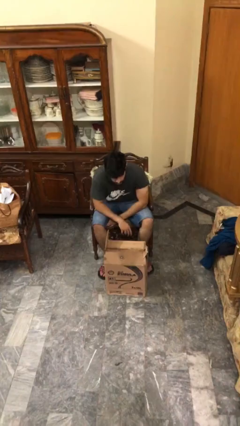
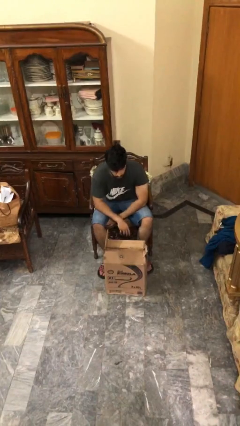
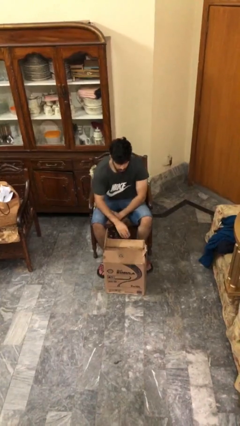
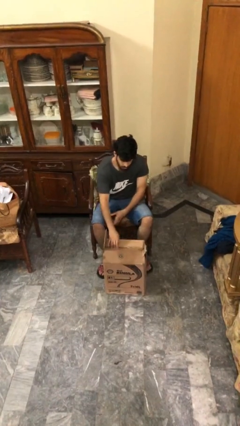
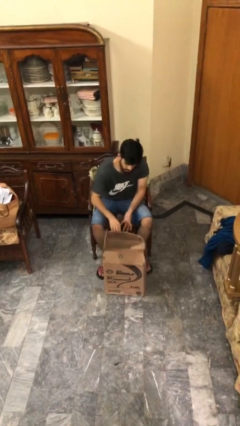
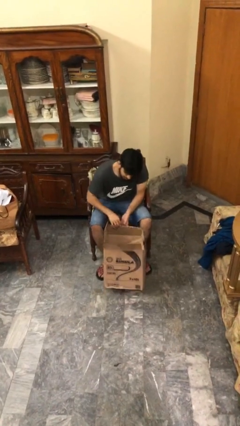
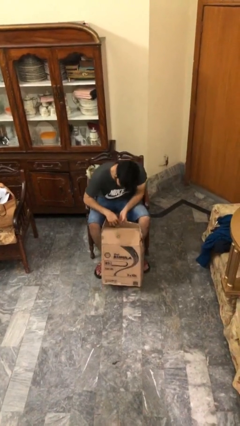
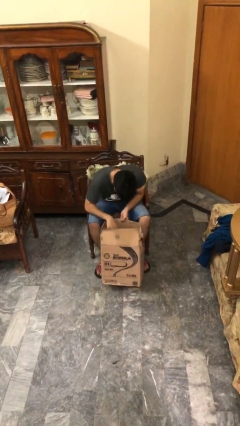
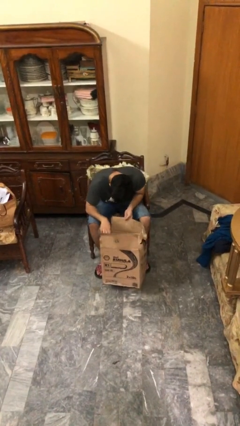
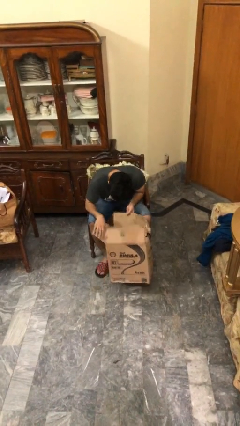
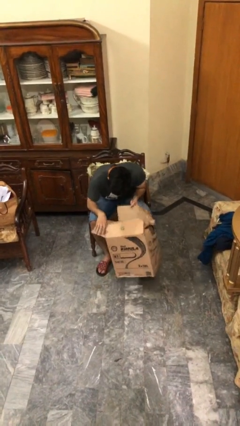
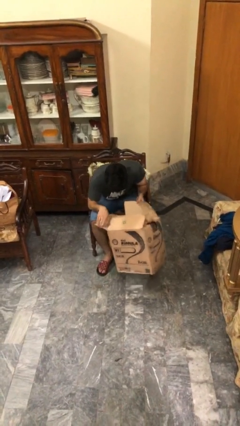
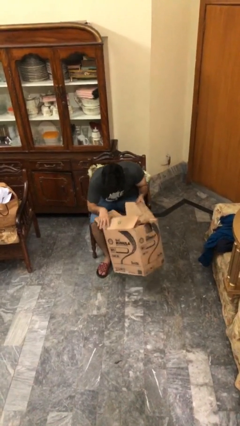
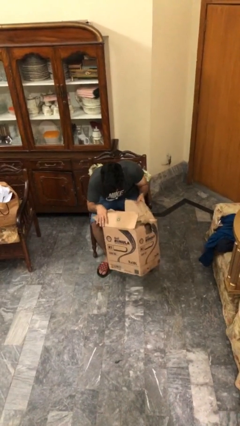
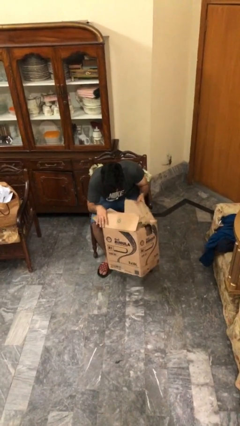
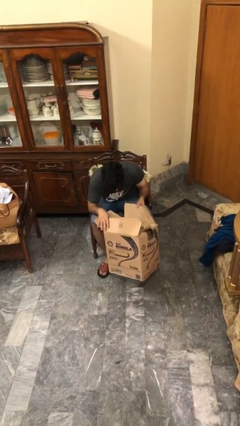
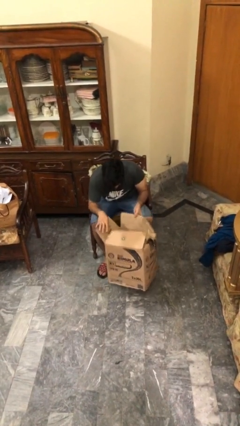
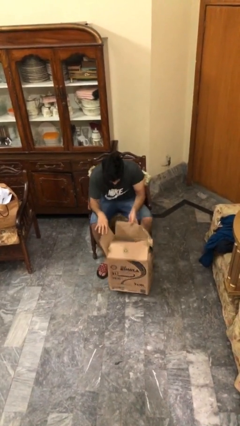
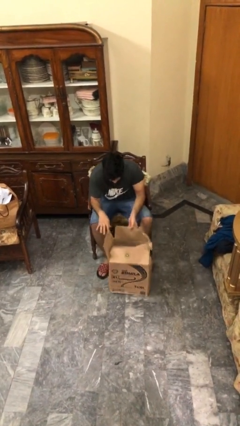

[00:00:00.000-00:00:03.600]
person searches in box

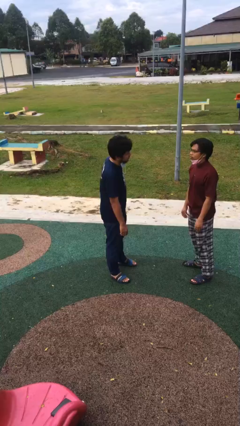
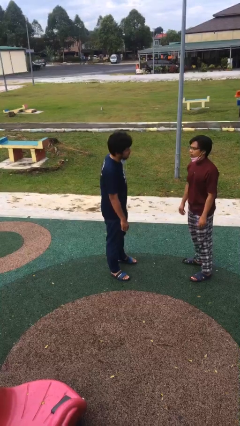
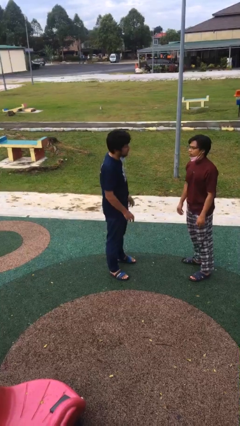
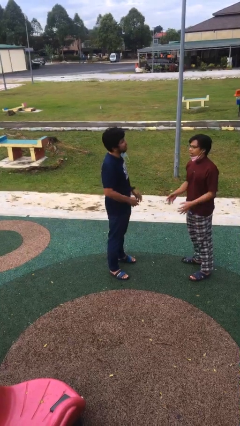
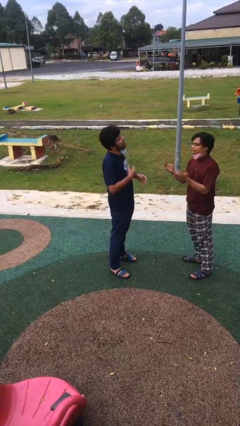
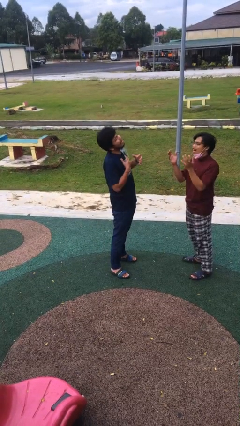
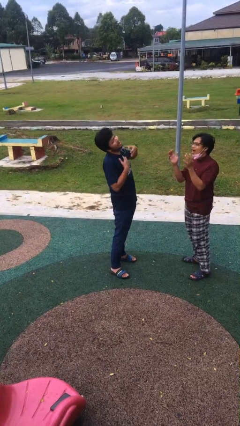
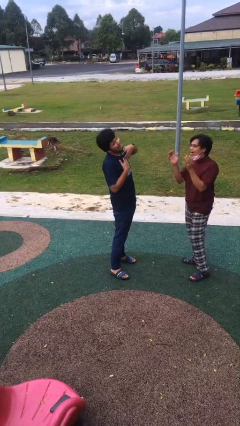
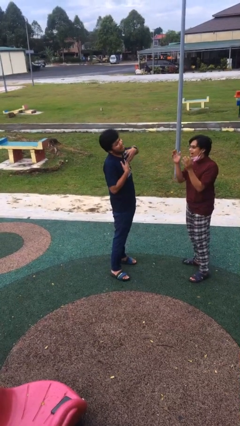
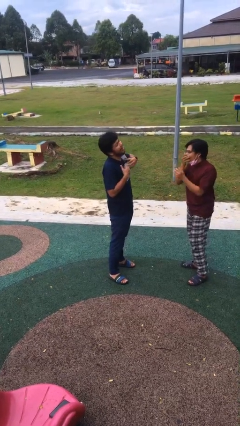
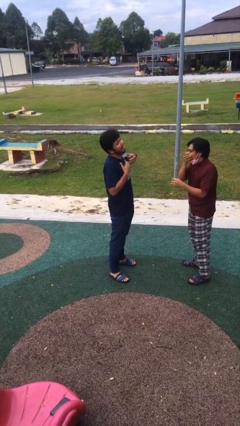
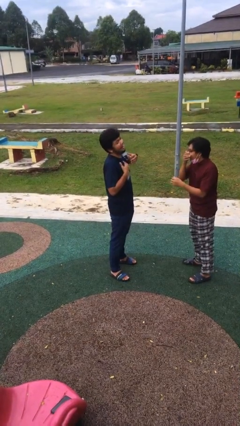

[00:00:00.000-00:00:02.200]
person laughs with person

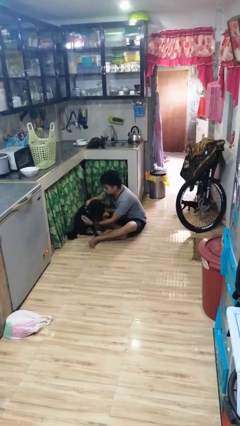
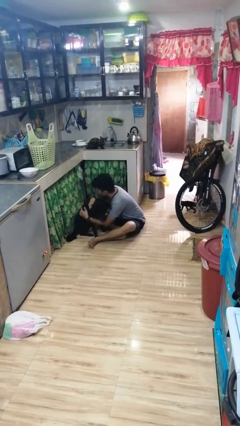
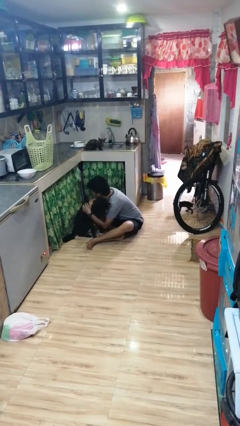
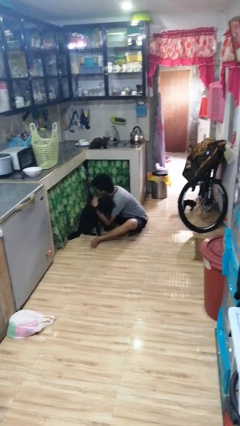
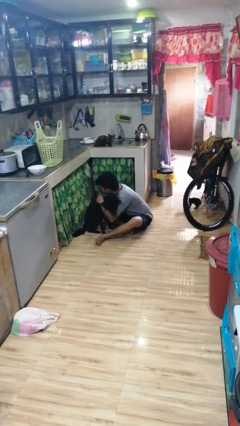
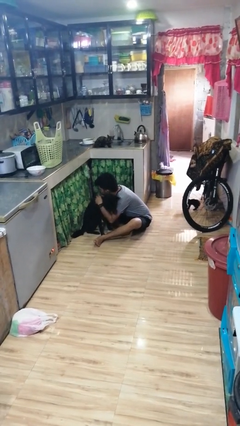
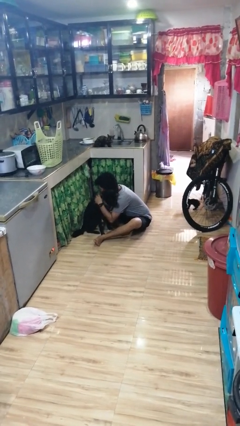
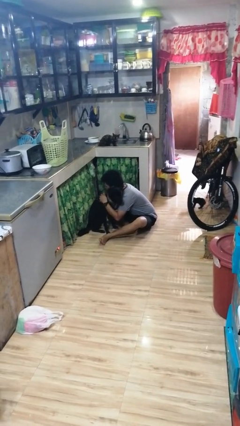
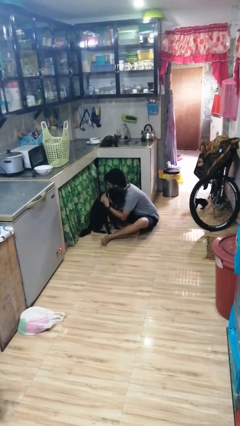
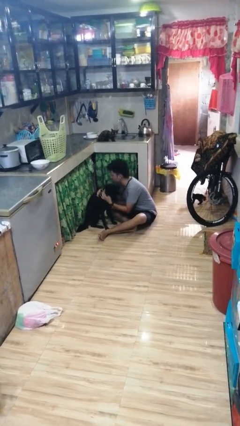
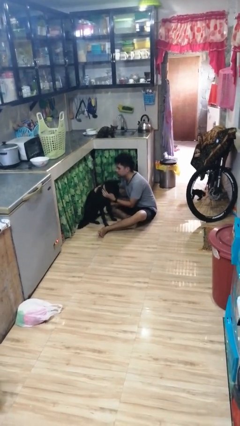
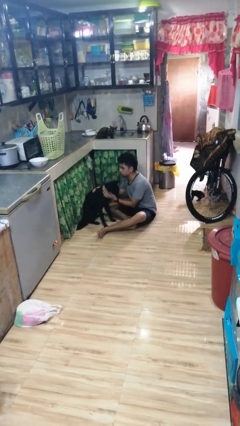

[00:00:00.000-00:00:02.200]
person hugs dog

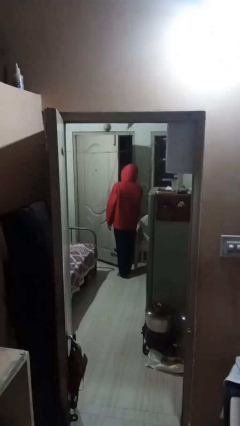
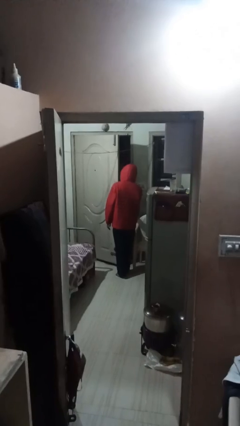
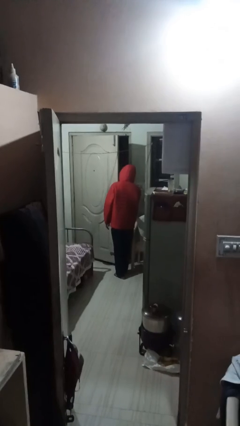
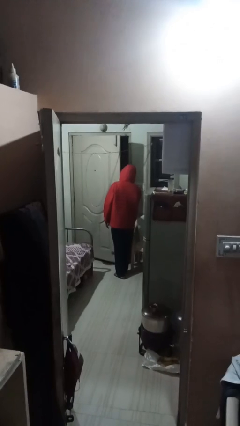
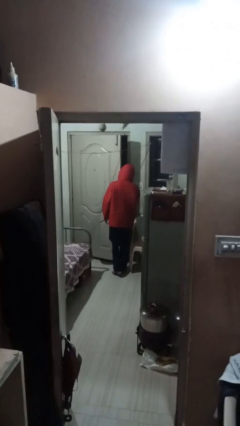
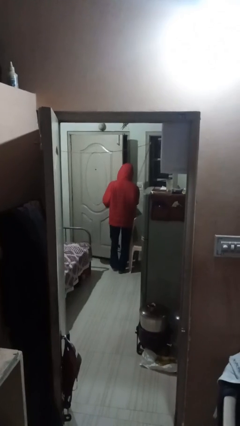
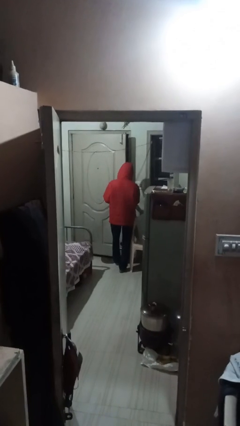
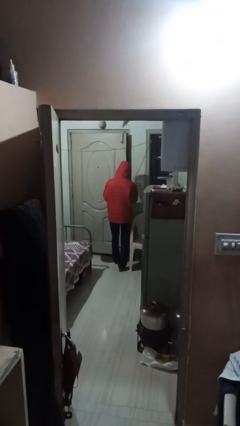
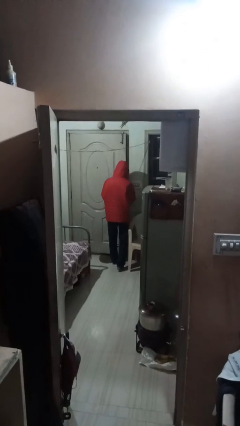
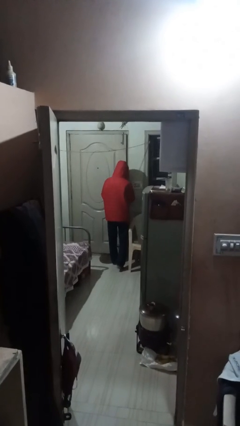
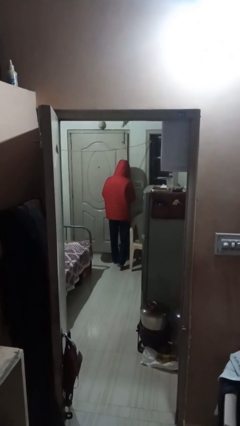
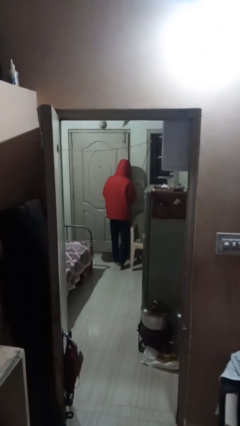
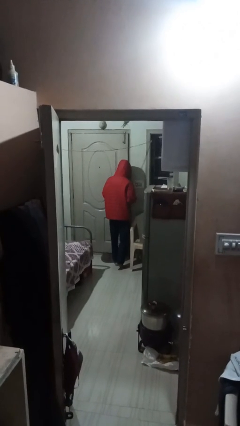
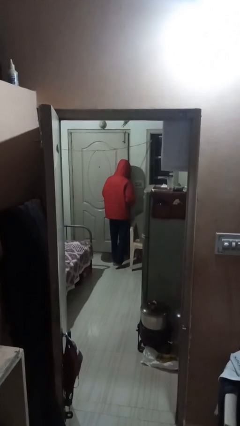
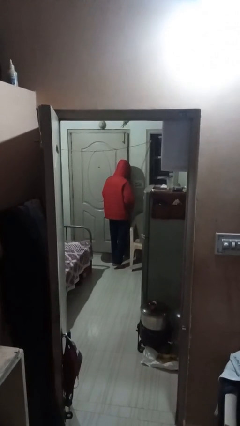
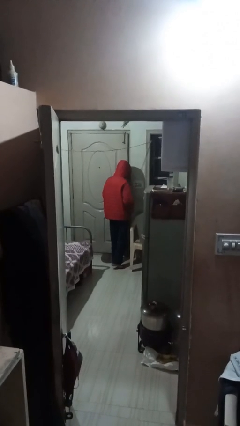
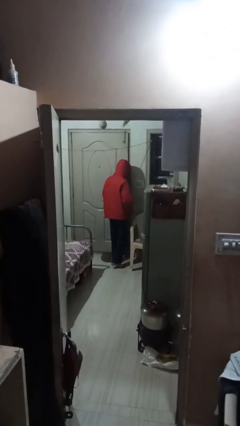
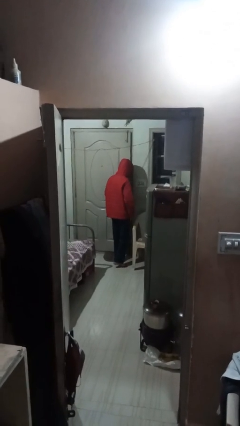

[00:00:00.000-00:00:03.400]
person closes facility door

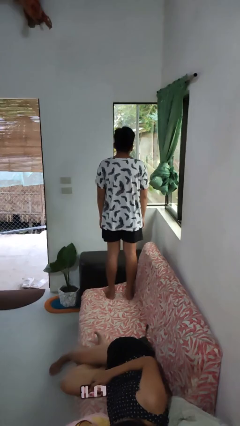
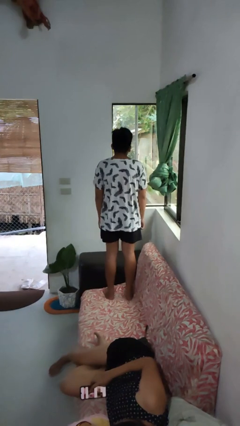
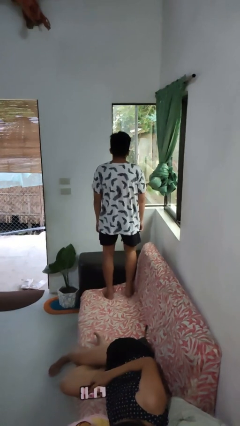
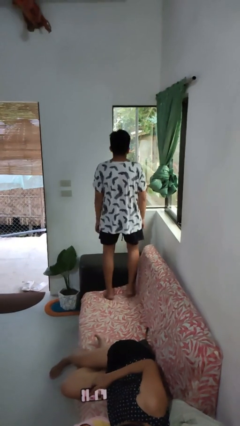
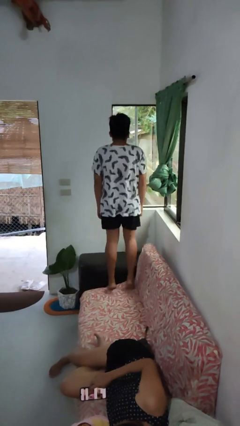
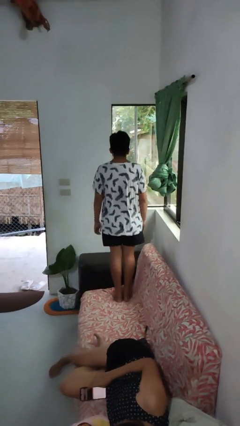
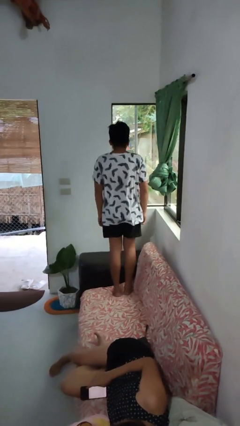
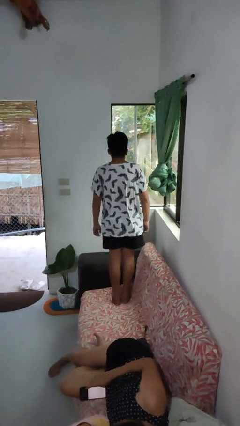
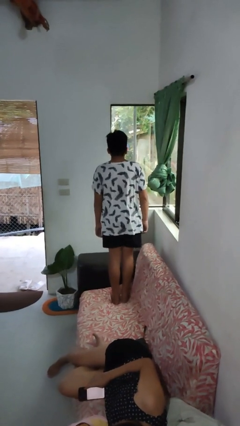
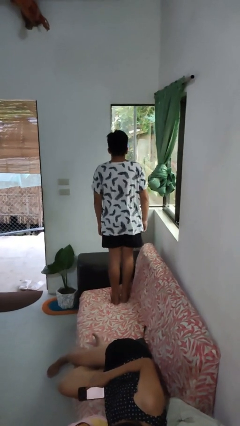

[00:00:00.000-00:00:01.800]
person jumps on couch

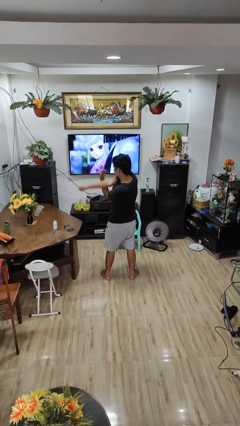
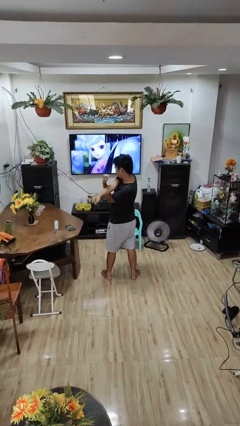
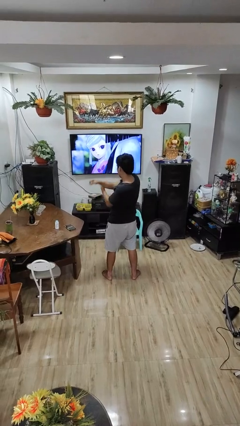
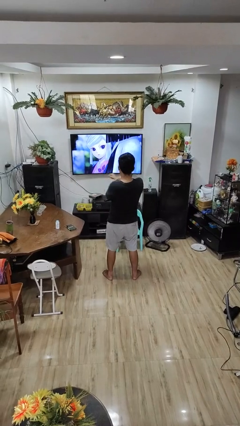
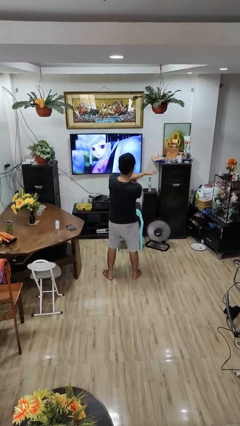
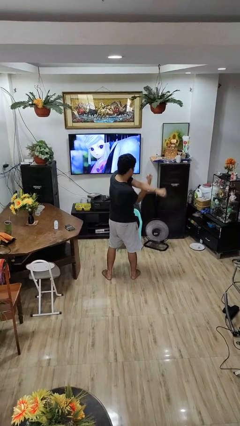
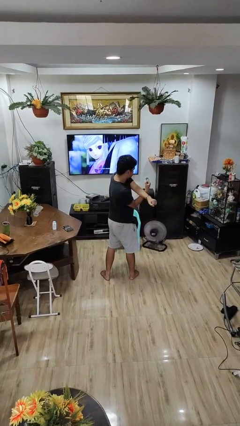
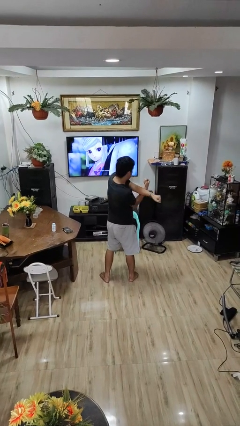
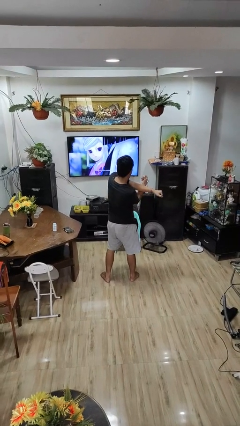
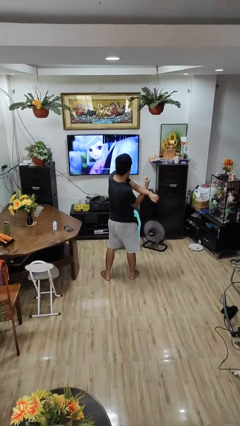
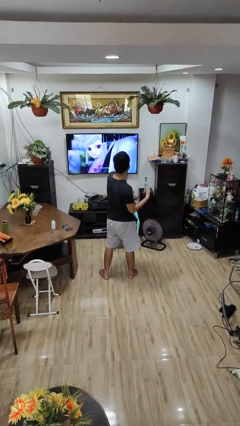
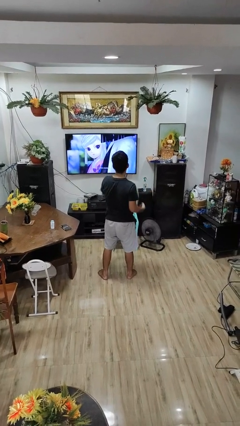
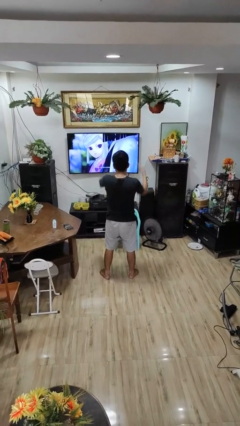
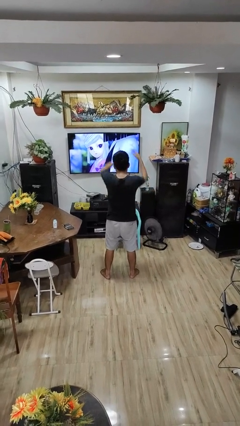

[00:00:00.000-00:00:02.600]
person stretches arms to side

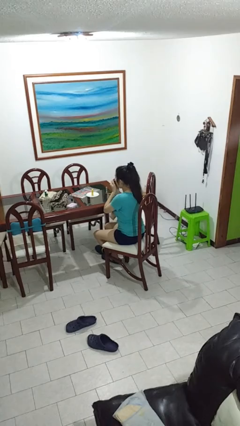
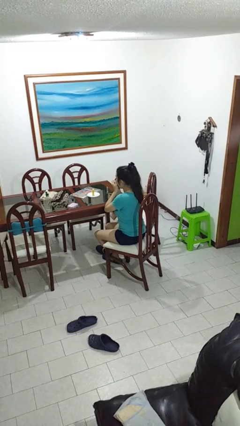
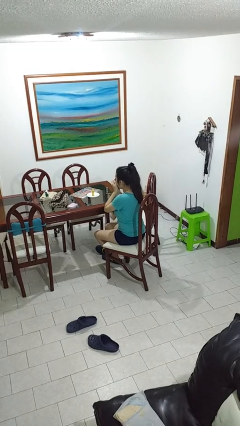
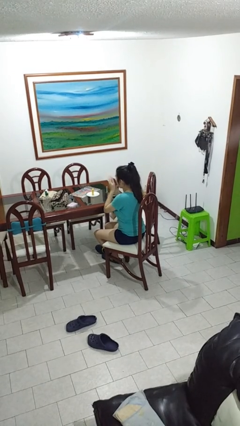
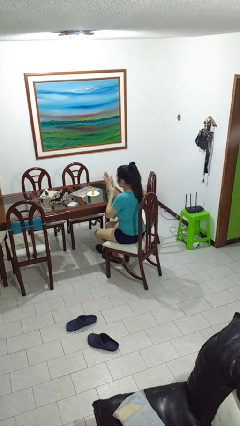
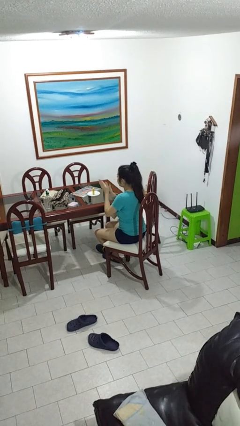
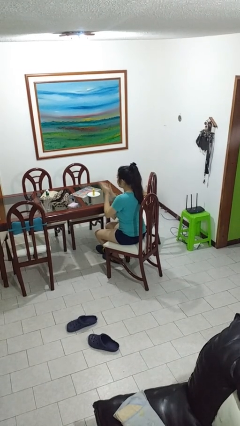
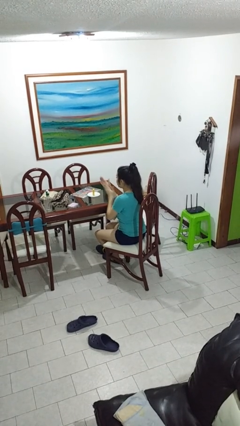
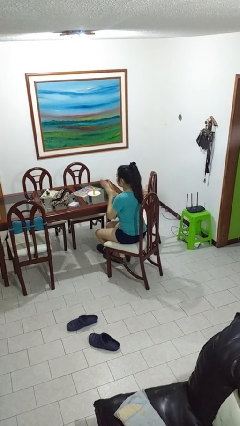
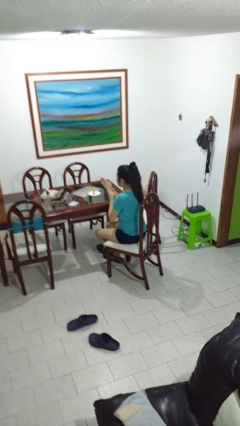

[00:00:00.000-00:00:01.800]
person blows into hands
